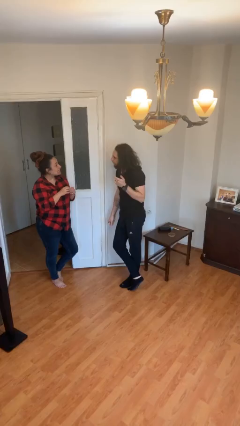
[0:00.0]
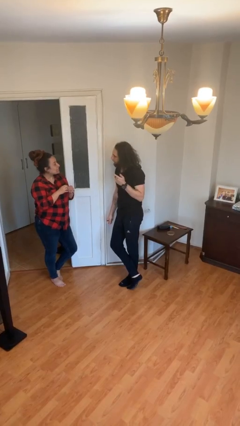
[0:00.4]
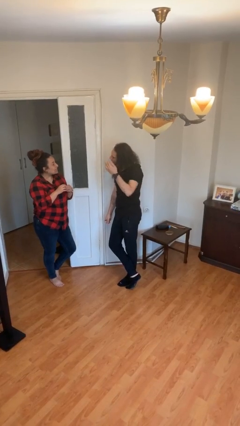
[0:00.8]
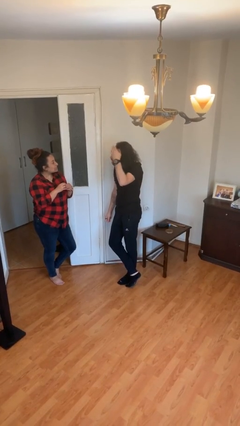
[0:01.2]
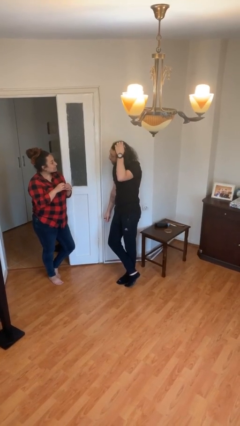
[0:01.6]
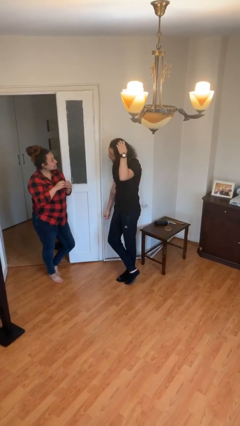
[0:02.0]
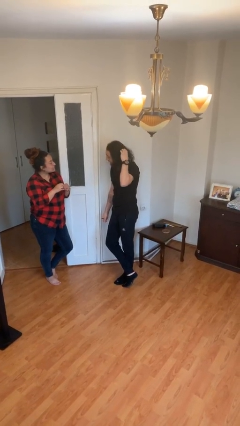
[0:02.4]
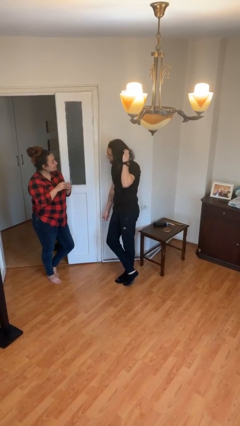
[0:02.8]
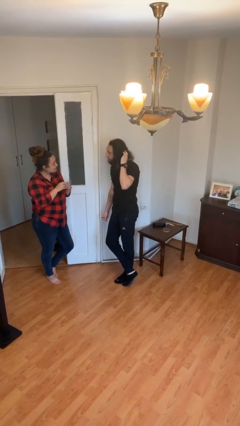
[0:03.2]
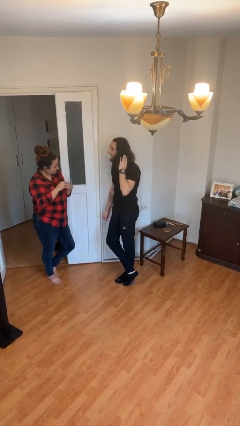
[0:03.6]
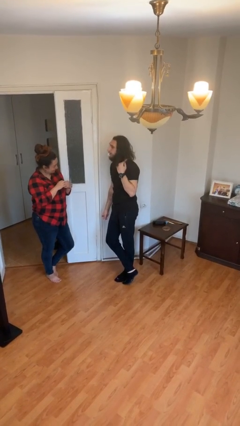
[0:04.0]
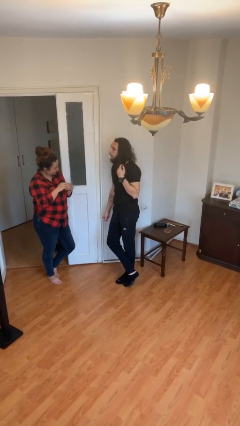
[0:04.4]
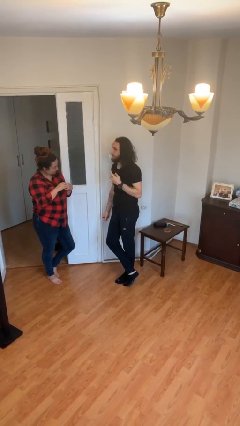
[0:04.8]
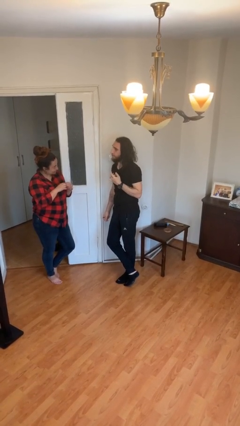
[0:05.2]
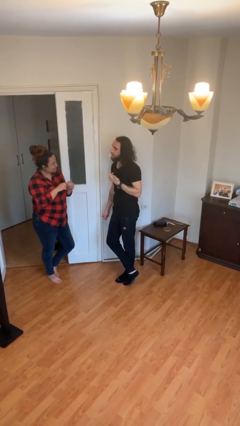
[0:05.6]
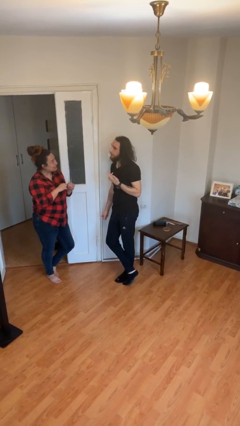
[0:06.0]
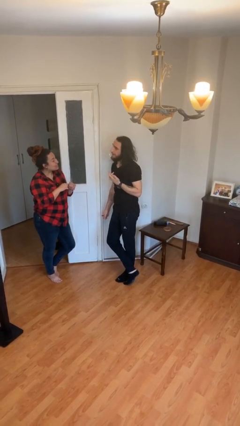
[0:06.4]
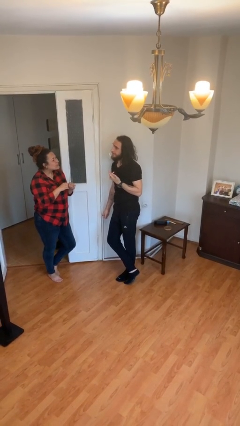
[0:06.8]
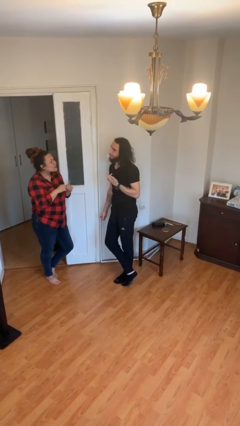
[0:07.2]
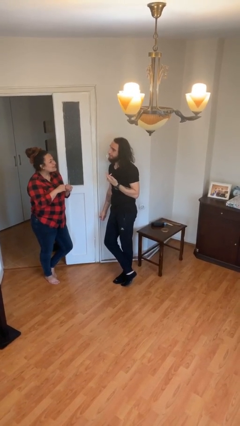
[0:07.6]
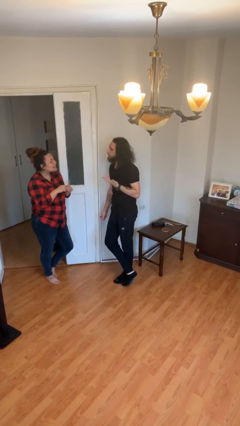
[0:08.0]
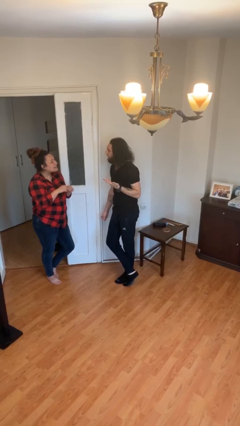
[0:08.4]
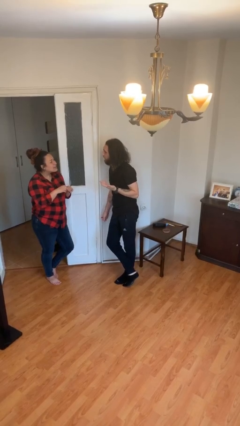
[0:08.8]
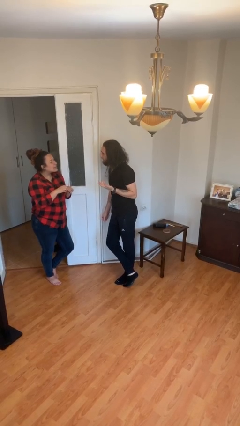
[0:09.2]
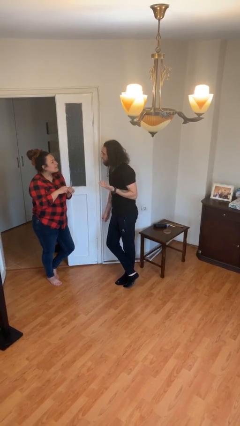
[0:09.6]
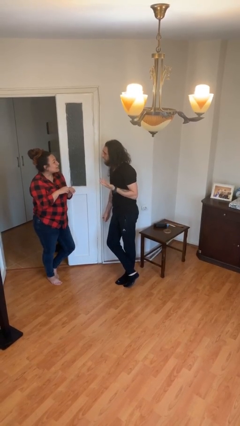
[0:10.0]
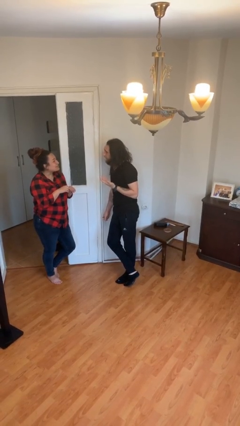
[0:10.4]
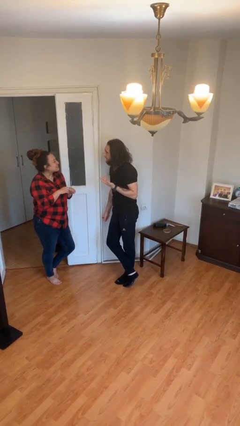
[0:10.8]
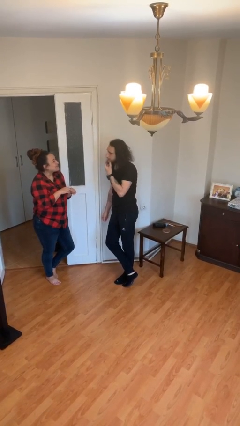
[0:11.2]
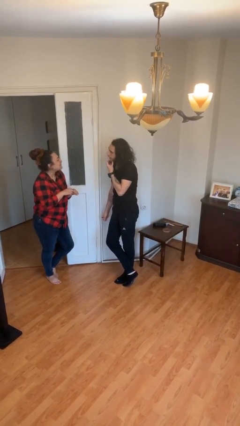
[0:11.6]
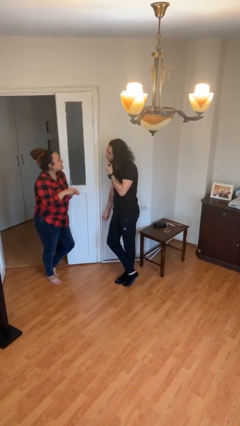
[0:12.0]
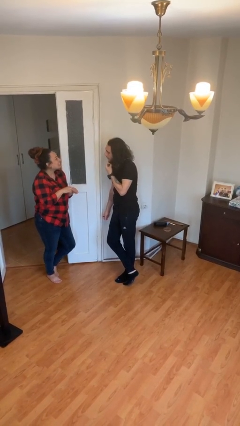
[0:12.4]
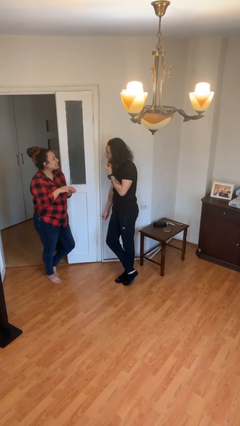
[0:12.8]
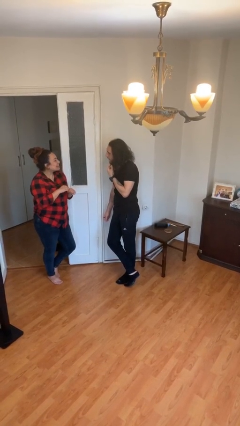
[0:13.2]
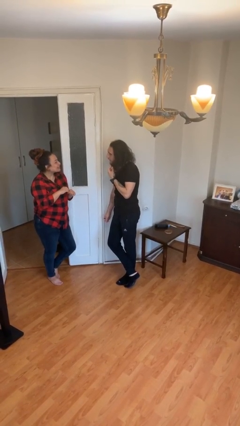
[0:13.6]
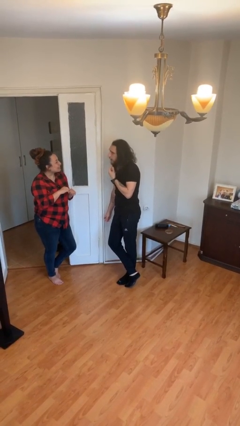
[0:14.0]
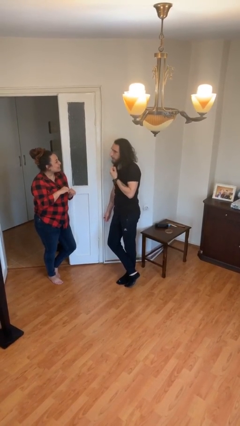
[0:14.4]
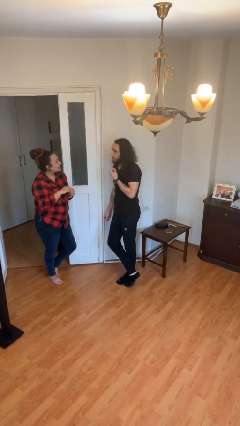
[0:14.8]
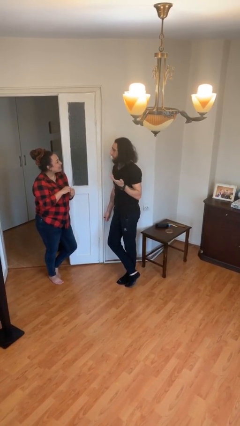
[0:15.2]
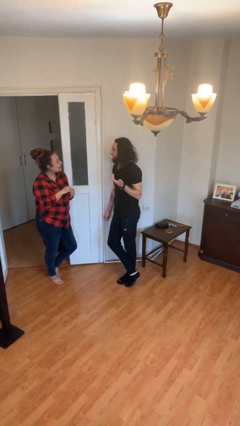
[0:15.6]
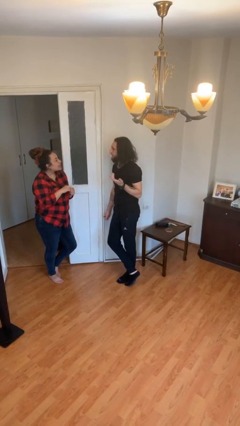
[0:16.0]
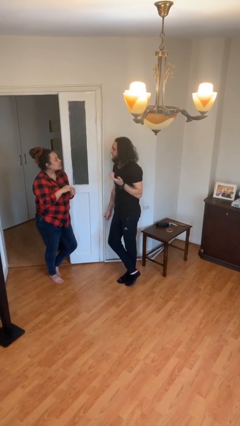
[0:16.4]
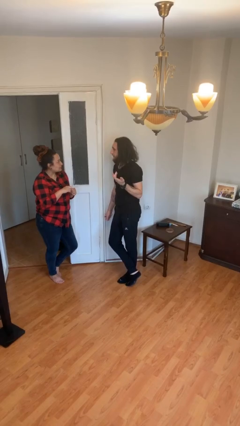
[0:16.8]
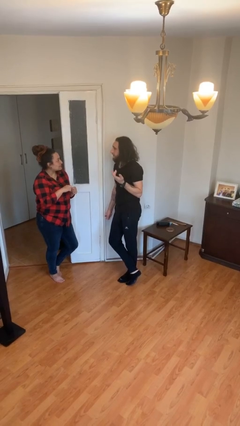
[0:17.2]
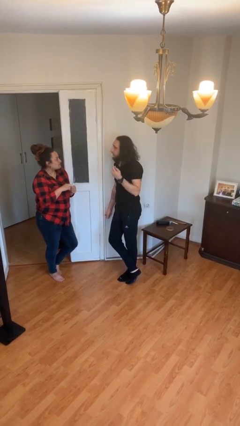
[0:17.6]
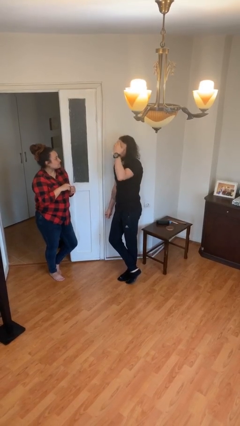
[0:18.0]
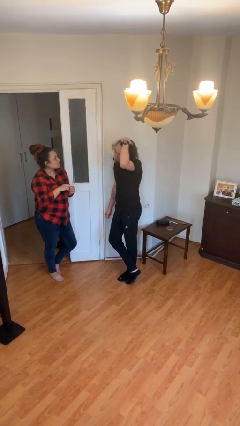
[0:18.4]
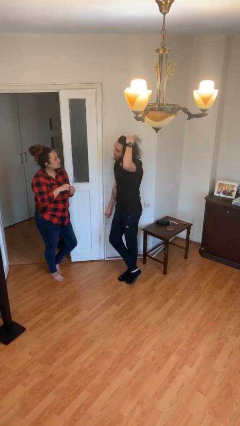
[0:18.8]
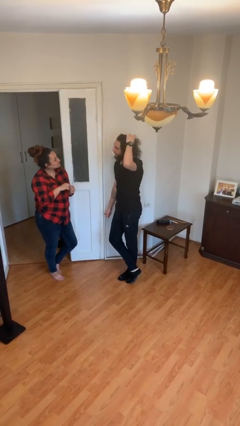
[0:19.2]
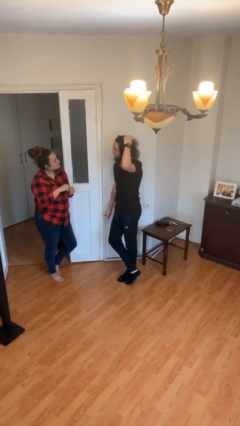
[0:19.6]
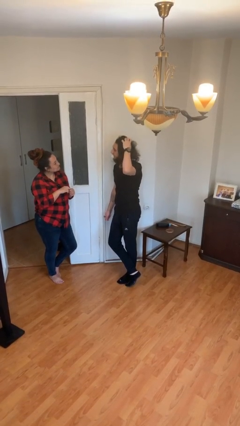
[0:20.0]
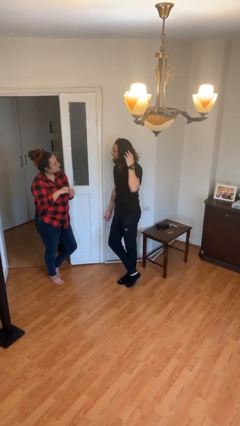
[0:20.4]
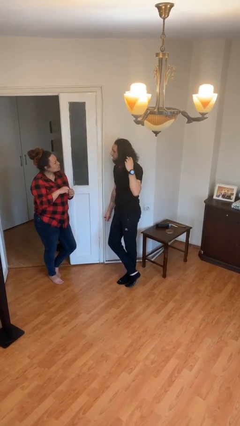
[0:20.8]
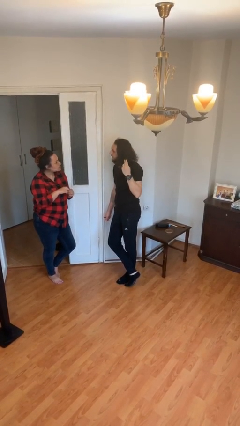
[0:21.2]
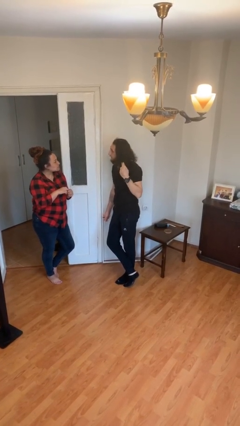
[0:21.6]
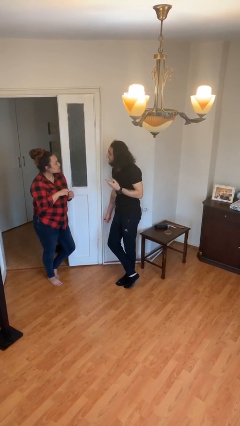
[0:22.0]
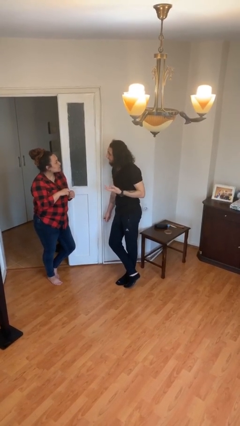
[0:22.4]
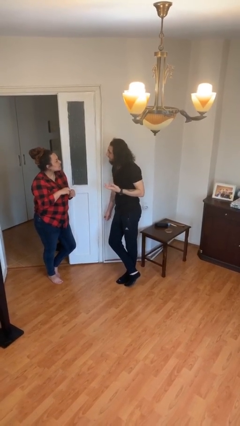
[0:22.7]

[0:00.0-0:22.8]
person talks to person

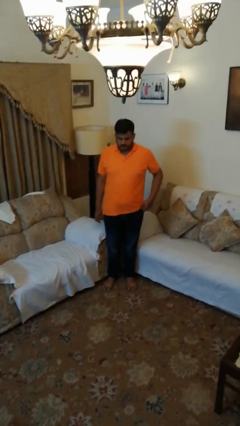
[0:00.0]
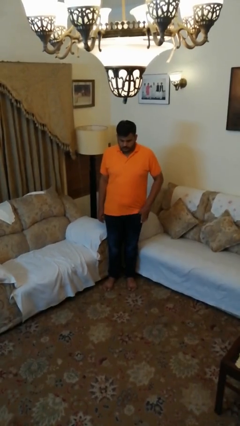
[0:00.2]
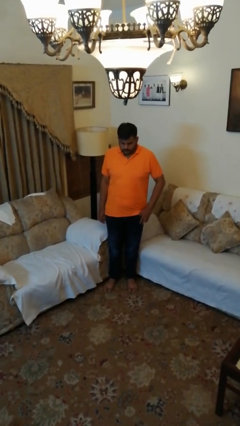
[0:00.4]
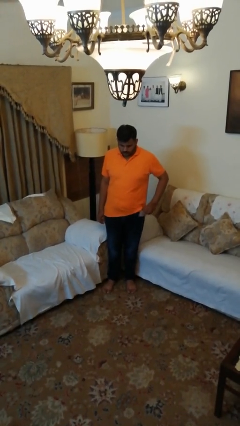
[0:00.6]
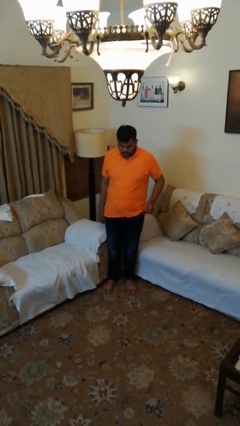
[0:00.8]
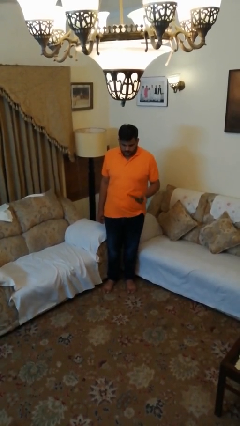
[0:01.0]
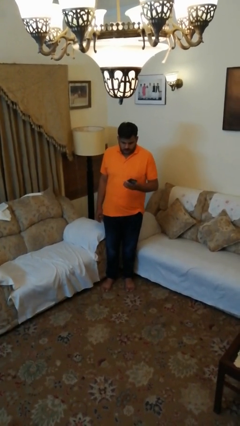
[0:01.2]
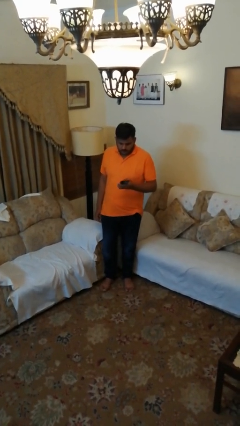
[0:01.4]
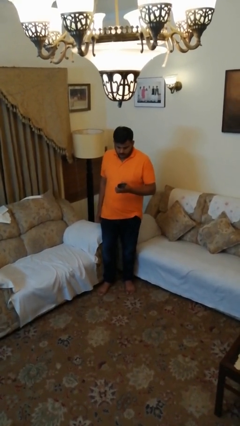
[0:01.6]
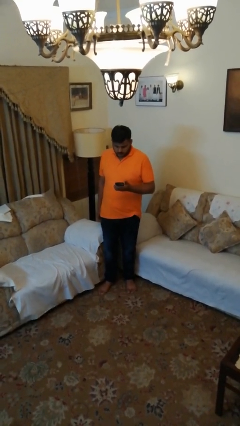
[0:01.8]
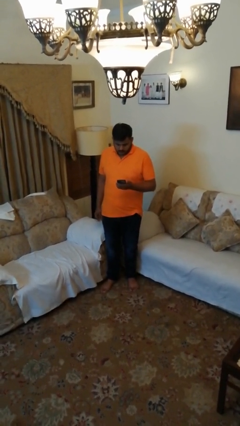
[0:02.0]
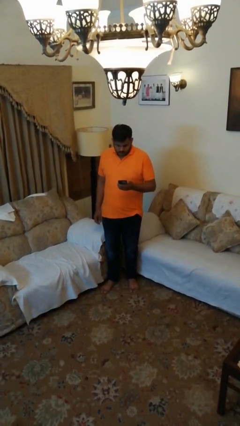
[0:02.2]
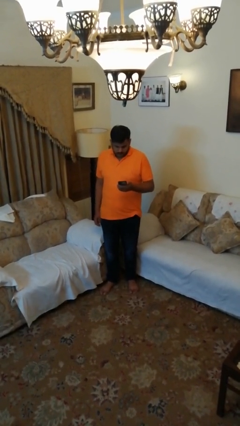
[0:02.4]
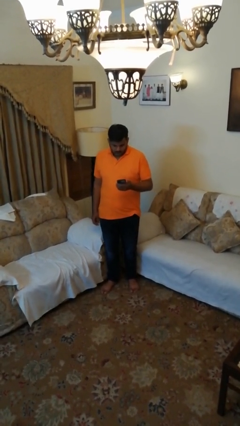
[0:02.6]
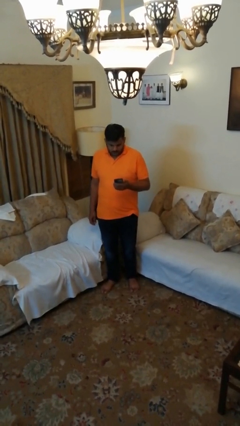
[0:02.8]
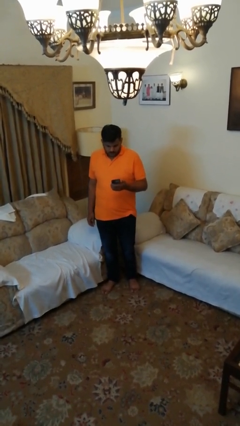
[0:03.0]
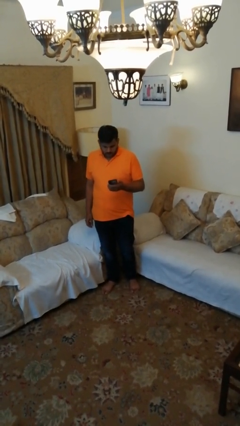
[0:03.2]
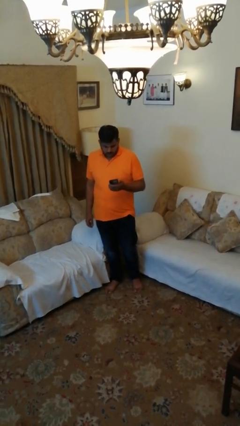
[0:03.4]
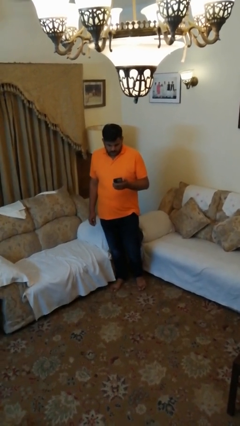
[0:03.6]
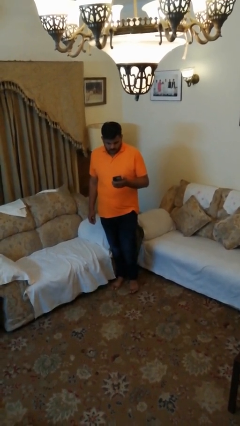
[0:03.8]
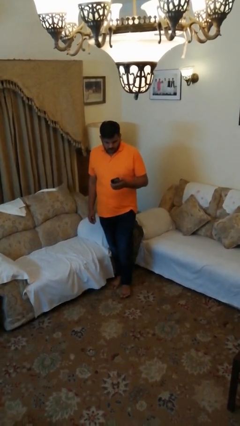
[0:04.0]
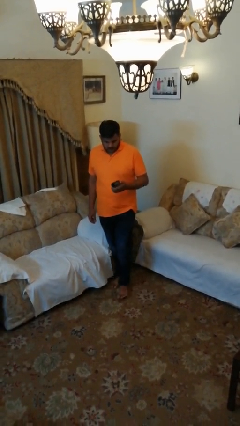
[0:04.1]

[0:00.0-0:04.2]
person takes phone from pocket

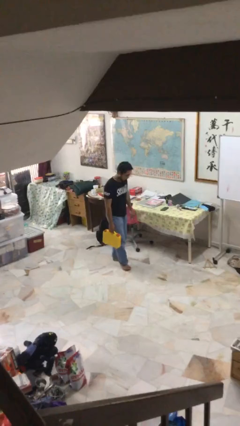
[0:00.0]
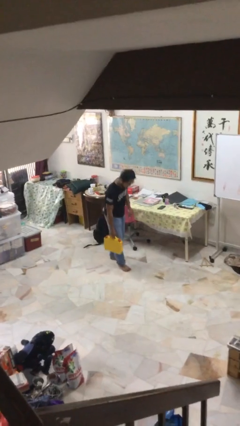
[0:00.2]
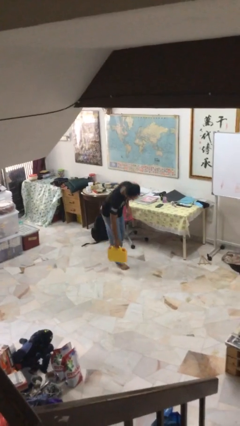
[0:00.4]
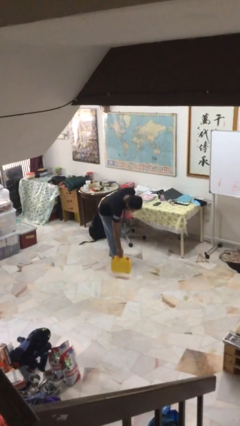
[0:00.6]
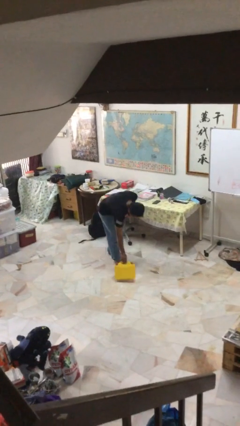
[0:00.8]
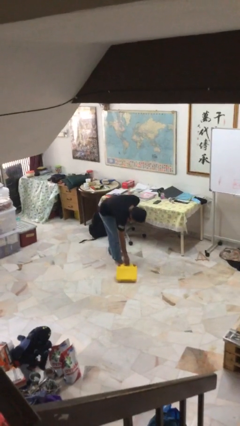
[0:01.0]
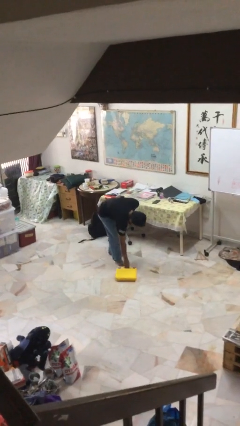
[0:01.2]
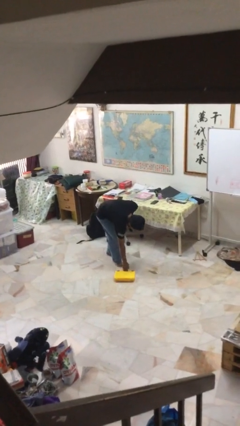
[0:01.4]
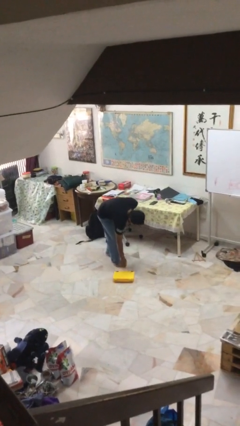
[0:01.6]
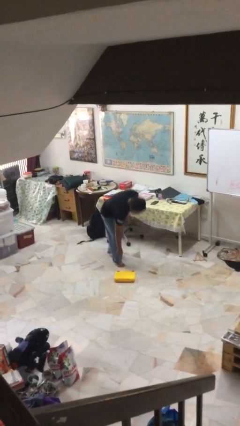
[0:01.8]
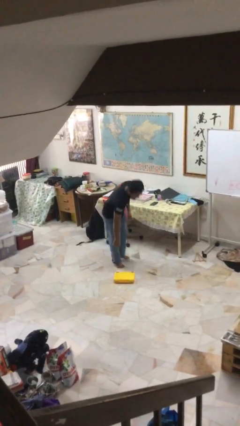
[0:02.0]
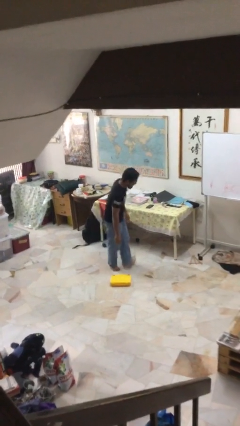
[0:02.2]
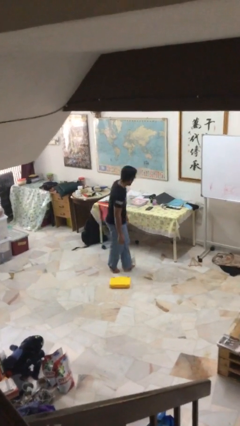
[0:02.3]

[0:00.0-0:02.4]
person puts down object on floor
